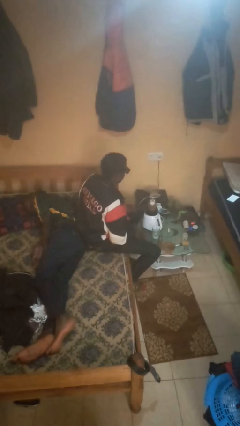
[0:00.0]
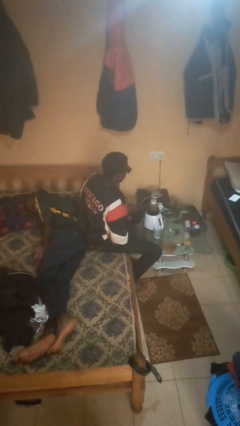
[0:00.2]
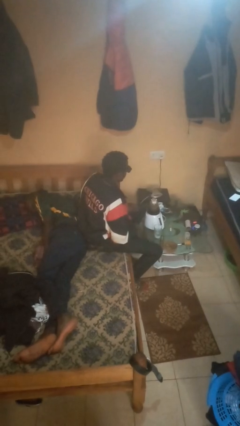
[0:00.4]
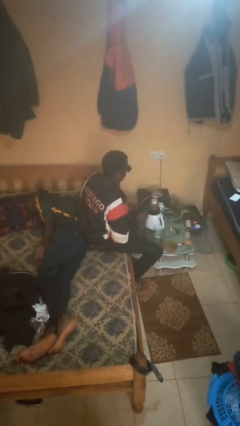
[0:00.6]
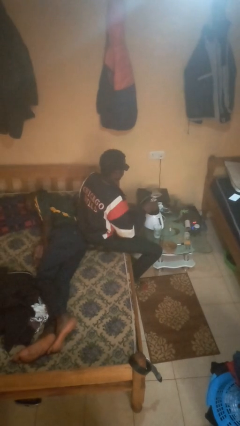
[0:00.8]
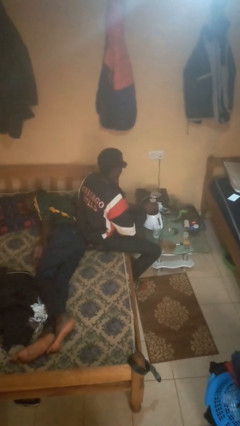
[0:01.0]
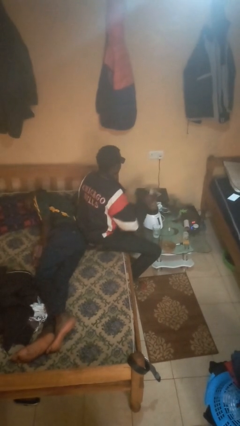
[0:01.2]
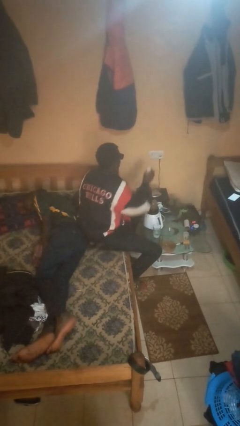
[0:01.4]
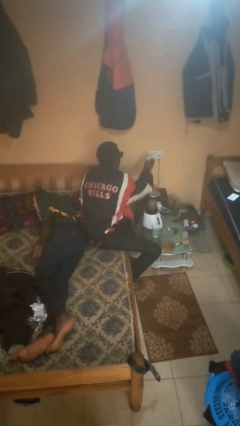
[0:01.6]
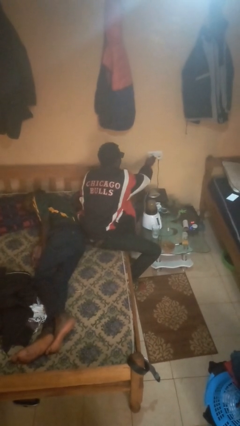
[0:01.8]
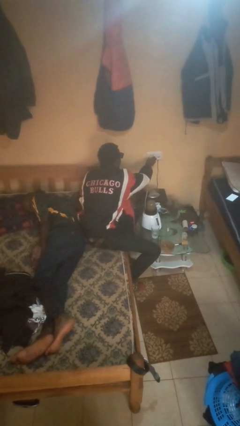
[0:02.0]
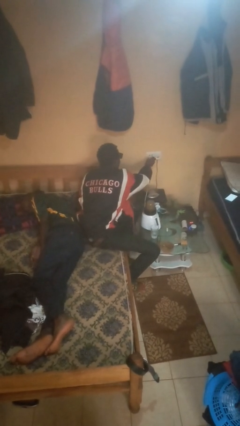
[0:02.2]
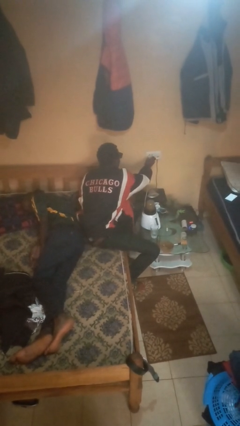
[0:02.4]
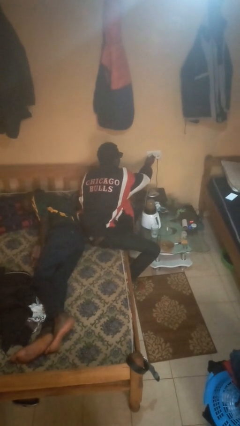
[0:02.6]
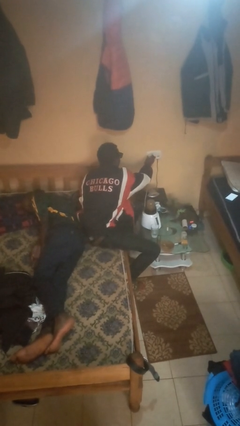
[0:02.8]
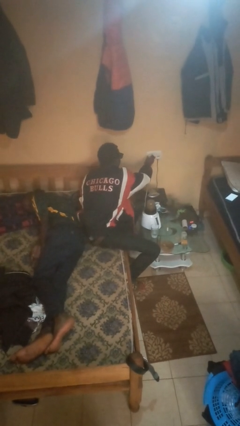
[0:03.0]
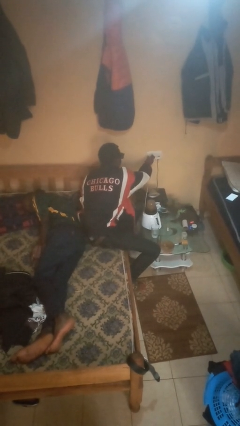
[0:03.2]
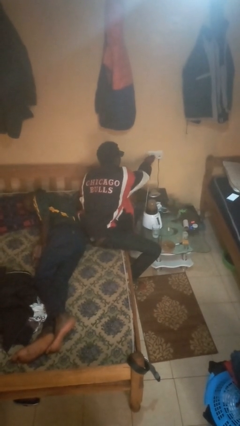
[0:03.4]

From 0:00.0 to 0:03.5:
person plugs into electrical socket

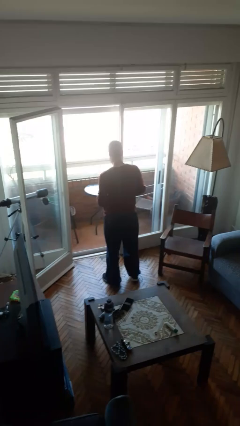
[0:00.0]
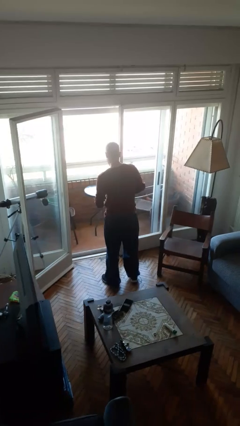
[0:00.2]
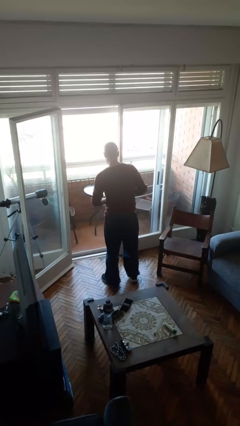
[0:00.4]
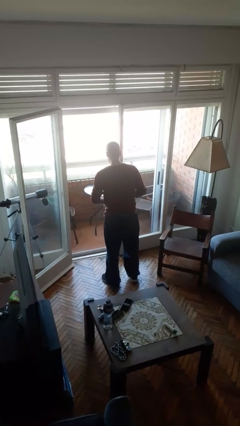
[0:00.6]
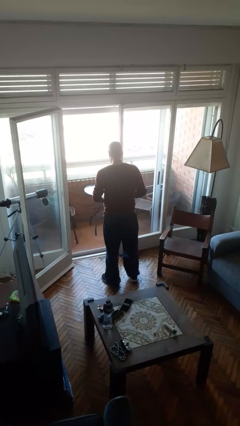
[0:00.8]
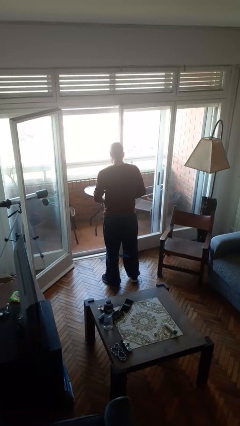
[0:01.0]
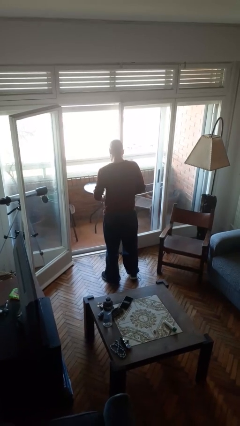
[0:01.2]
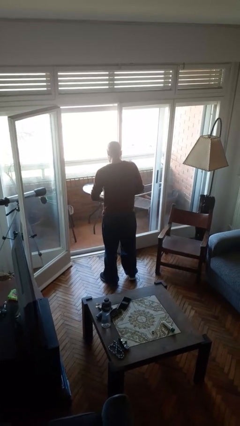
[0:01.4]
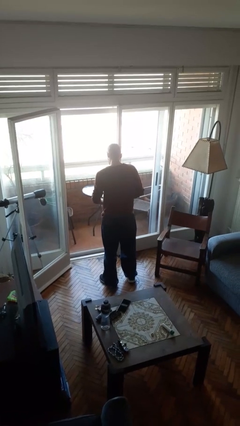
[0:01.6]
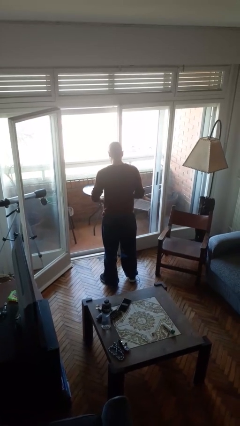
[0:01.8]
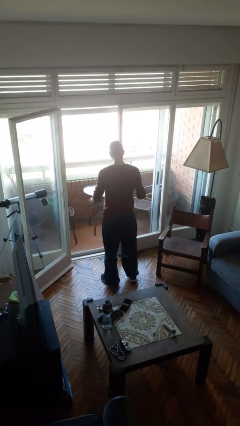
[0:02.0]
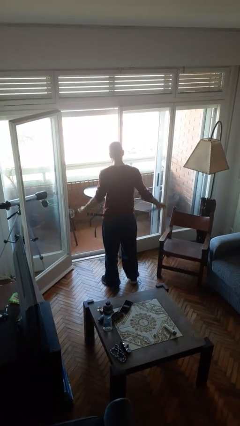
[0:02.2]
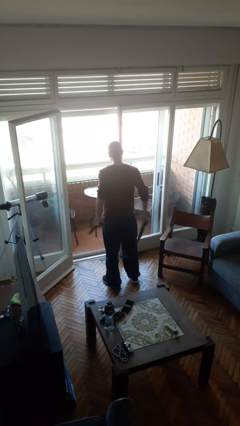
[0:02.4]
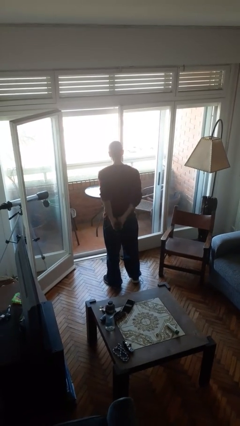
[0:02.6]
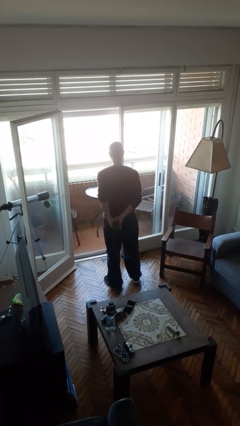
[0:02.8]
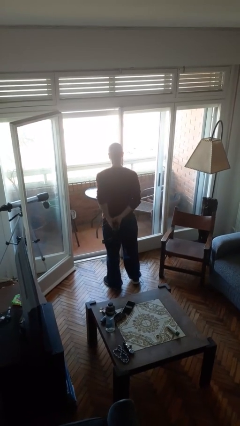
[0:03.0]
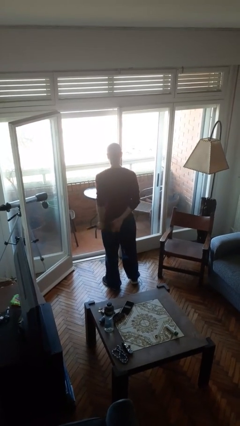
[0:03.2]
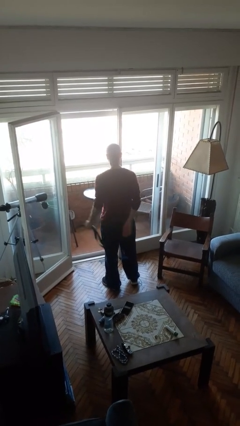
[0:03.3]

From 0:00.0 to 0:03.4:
person takes off belt

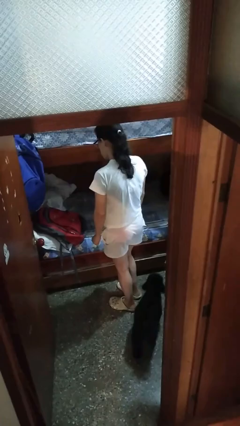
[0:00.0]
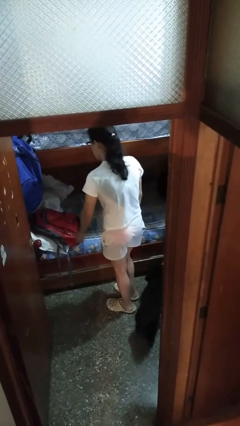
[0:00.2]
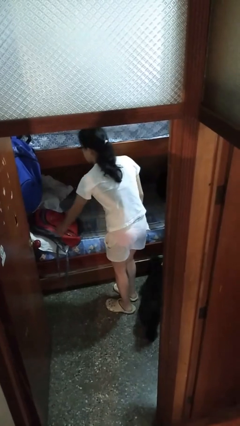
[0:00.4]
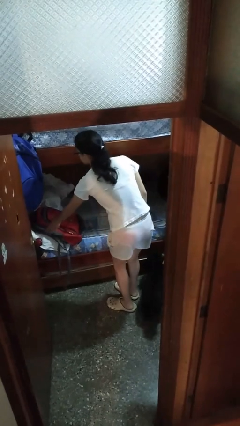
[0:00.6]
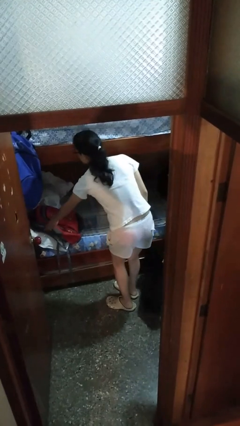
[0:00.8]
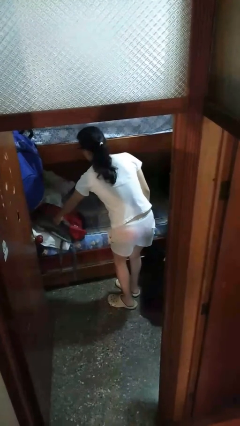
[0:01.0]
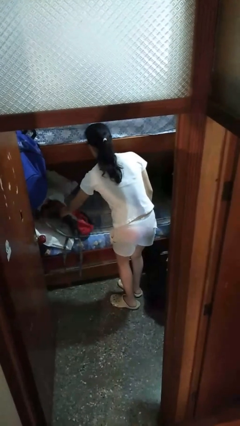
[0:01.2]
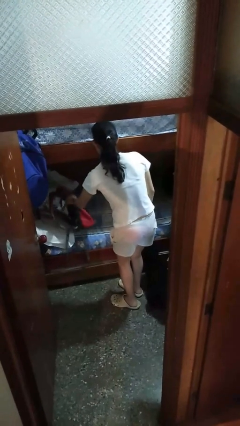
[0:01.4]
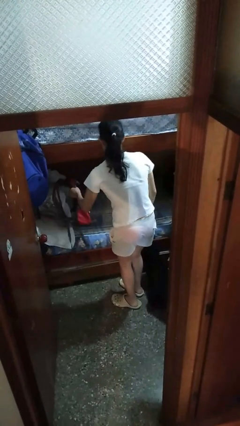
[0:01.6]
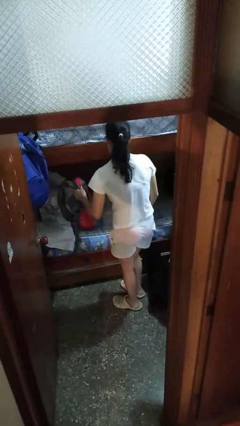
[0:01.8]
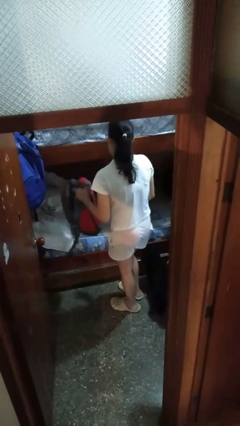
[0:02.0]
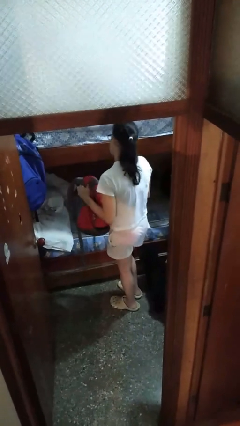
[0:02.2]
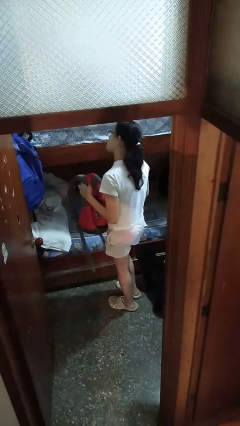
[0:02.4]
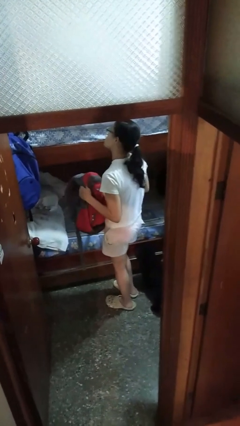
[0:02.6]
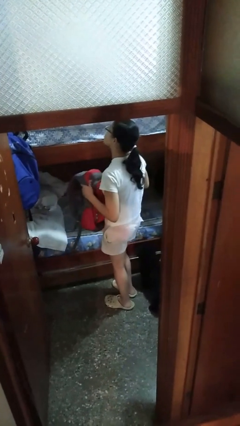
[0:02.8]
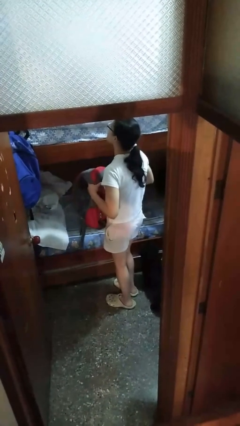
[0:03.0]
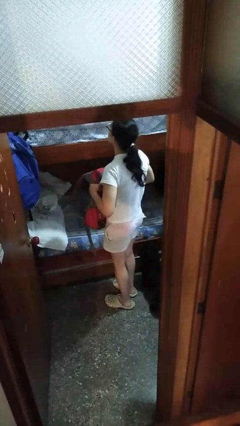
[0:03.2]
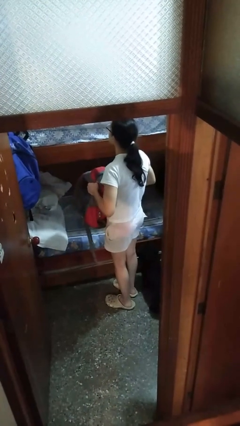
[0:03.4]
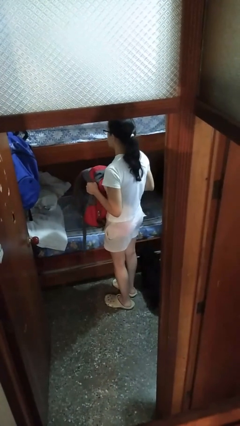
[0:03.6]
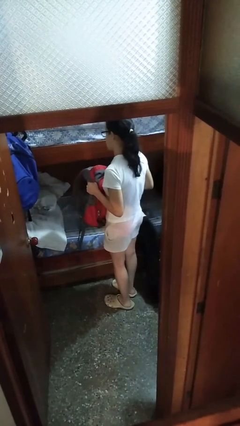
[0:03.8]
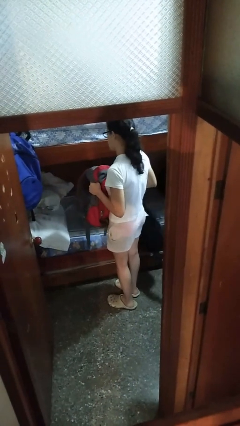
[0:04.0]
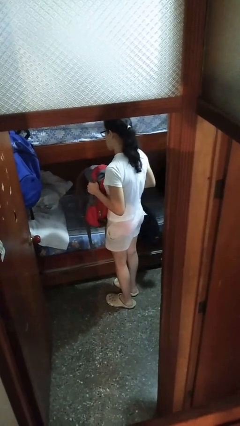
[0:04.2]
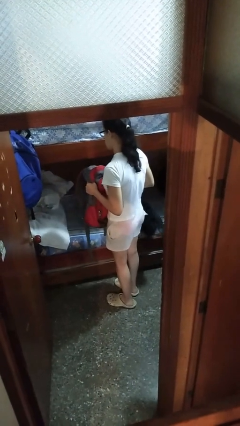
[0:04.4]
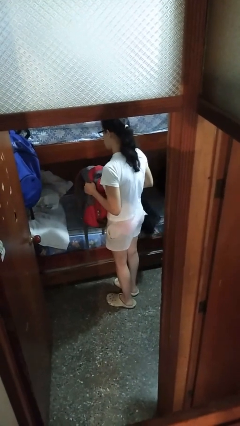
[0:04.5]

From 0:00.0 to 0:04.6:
person picks up object from bed

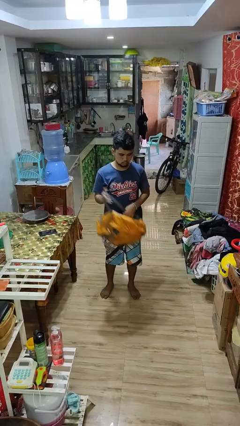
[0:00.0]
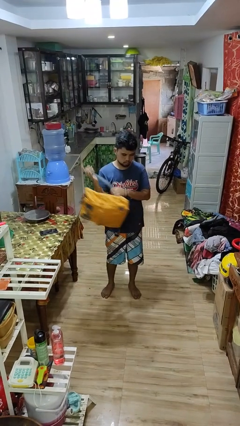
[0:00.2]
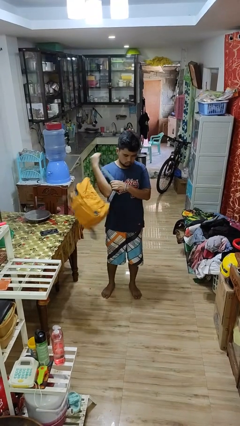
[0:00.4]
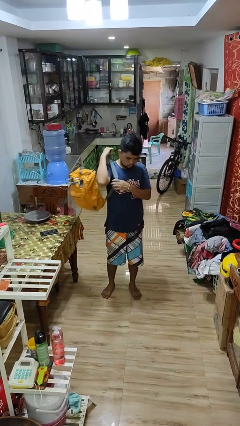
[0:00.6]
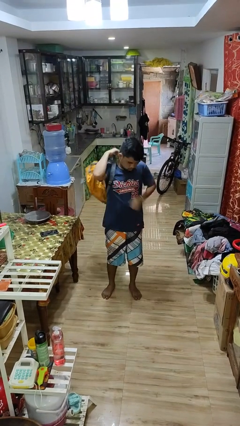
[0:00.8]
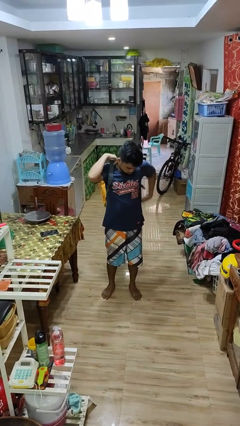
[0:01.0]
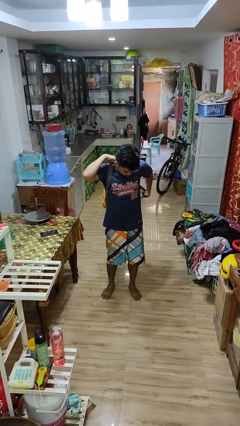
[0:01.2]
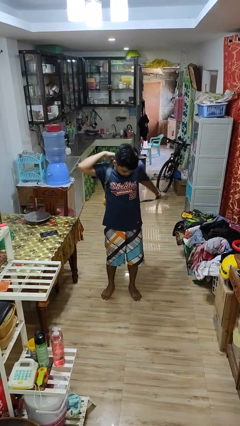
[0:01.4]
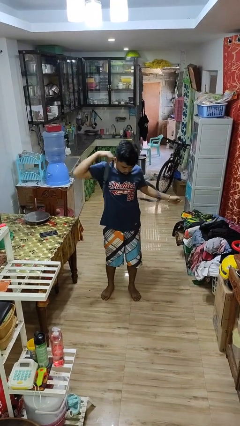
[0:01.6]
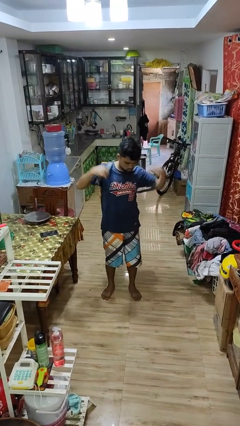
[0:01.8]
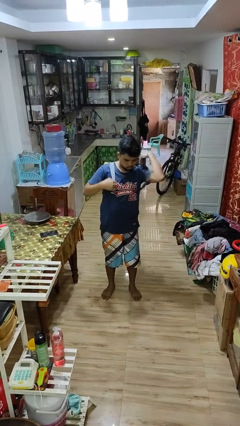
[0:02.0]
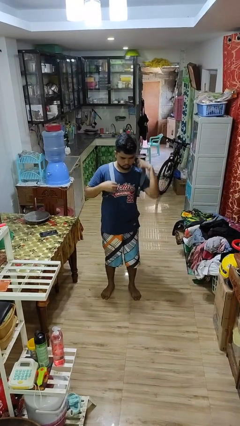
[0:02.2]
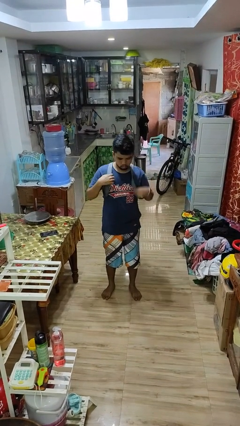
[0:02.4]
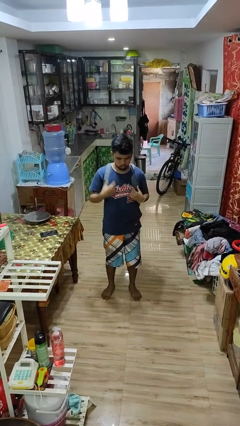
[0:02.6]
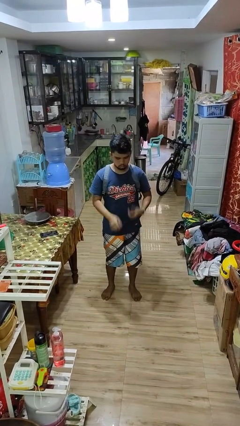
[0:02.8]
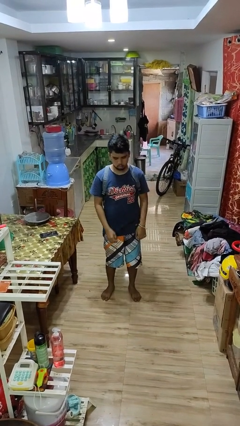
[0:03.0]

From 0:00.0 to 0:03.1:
person puts on backpack

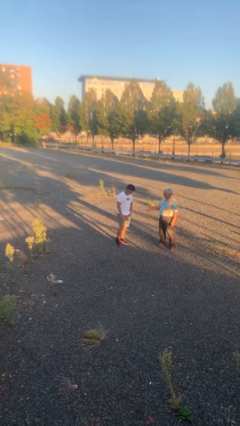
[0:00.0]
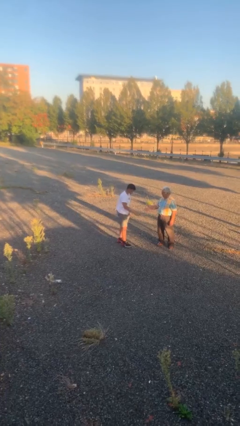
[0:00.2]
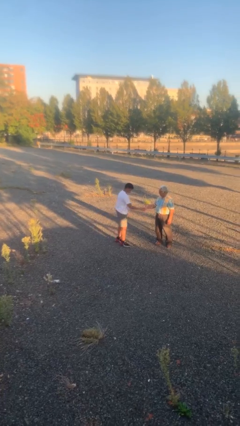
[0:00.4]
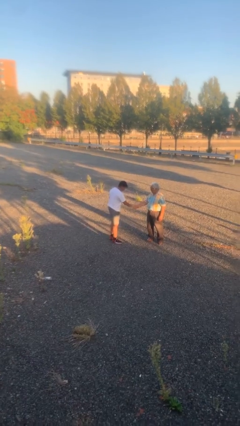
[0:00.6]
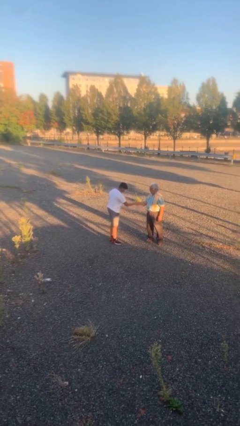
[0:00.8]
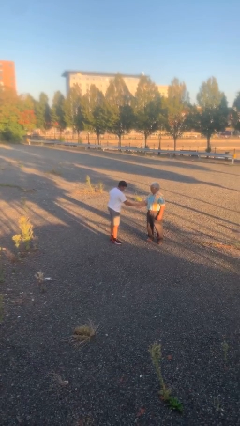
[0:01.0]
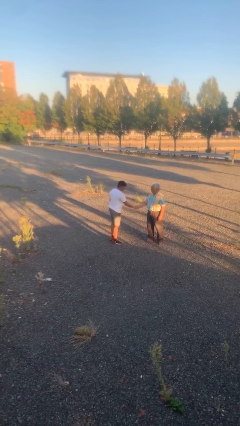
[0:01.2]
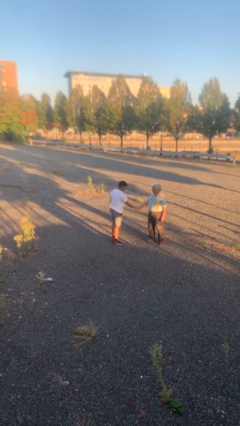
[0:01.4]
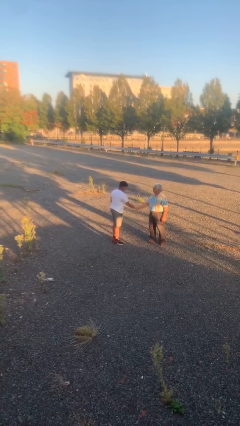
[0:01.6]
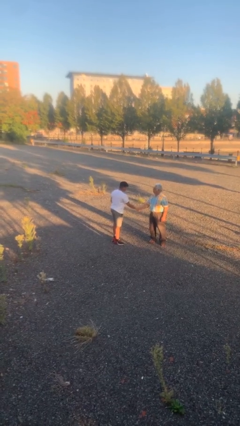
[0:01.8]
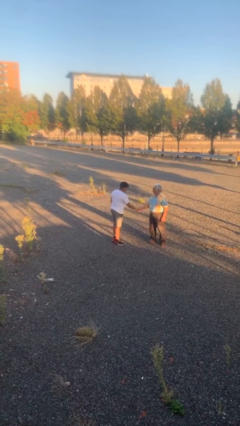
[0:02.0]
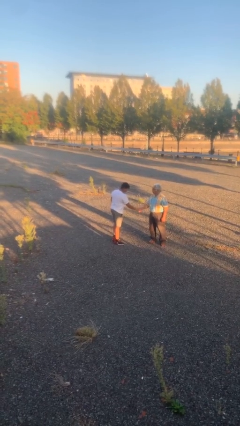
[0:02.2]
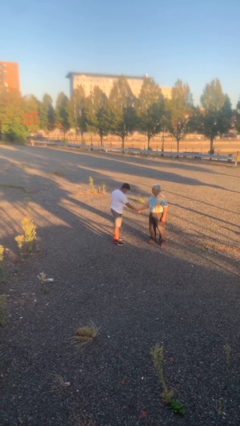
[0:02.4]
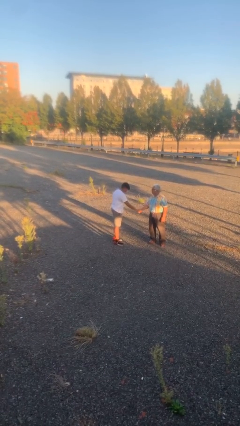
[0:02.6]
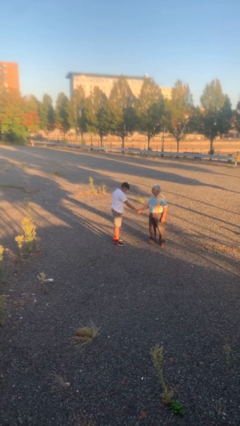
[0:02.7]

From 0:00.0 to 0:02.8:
person shakes hand

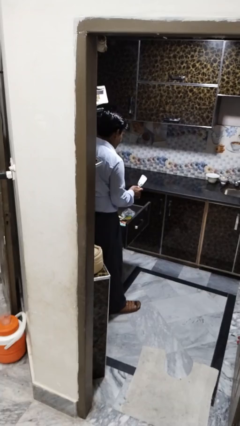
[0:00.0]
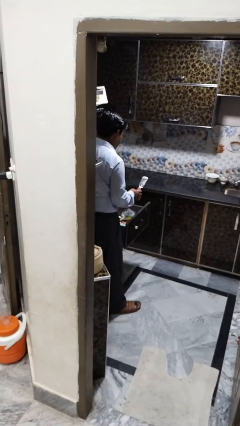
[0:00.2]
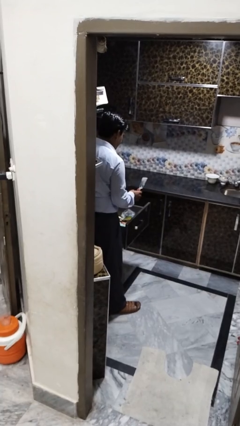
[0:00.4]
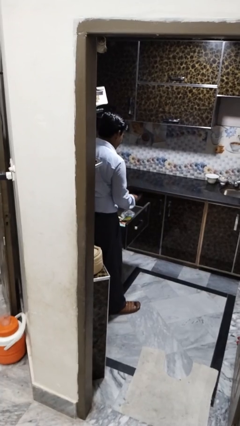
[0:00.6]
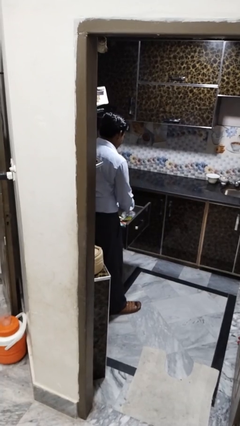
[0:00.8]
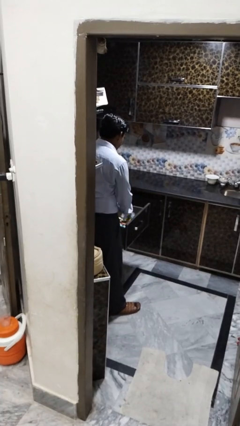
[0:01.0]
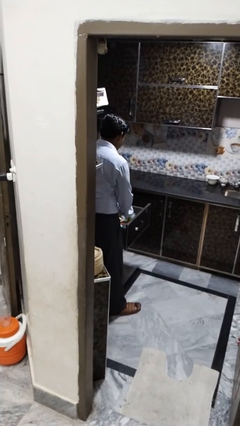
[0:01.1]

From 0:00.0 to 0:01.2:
person puts object into kitchen drawer
